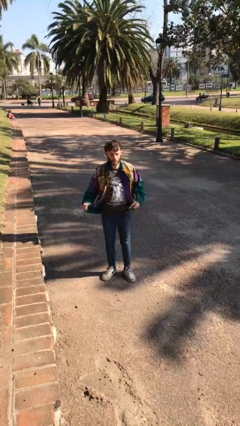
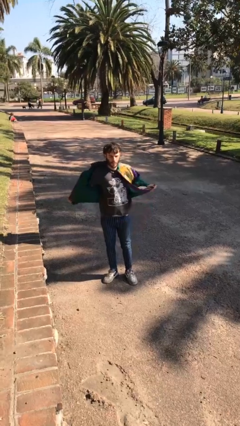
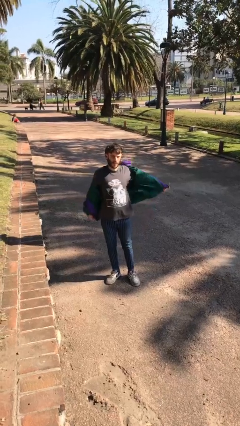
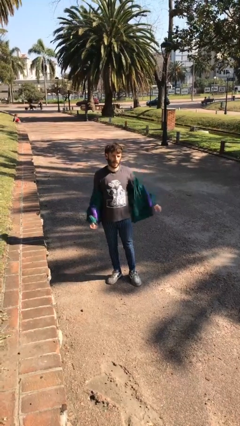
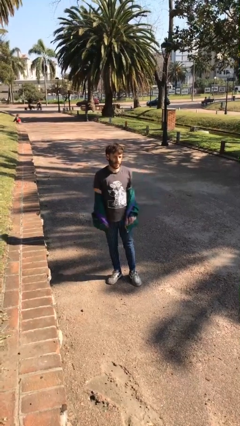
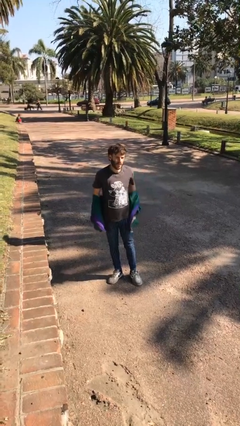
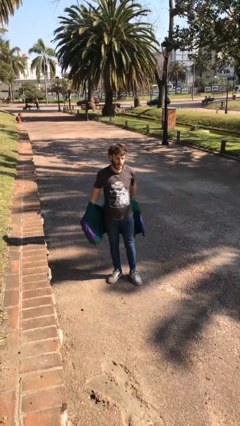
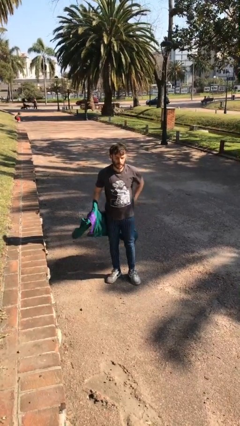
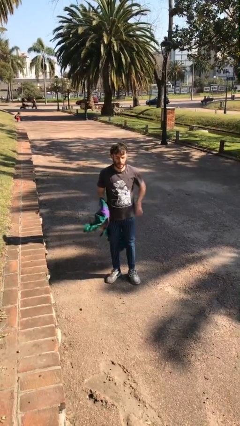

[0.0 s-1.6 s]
person takes off jacket

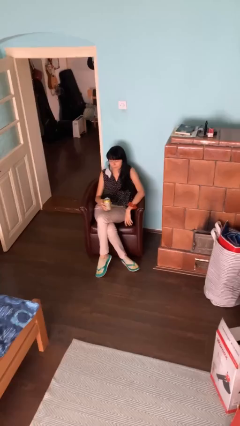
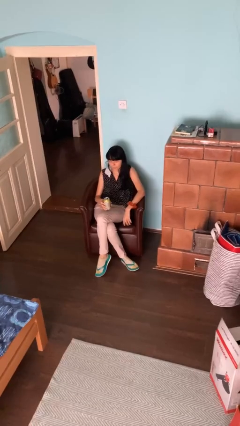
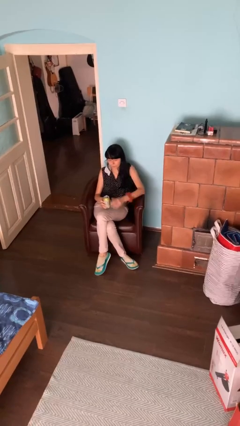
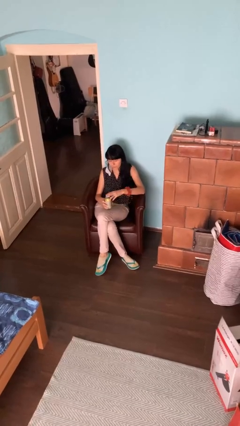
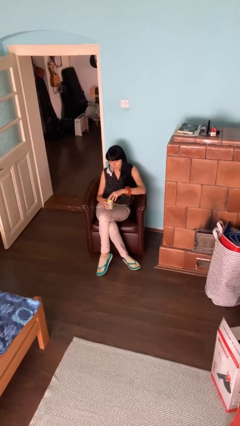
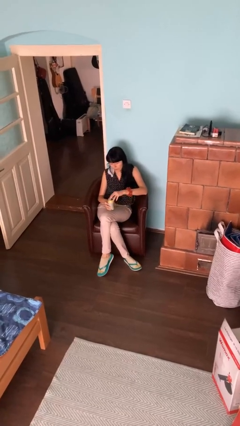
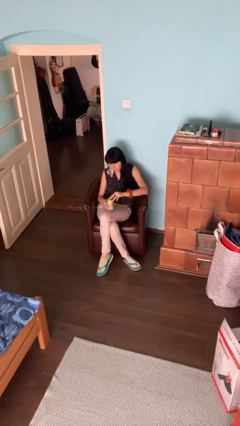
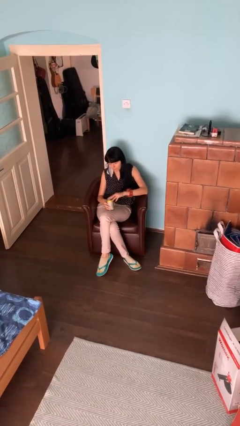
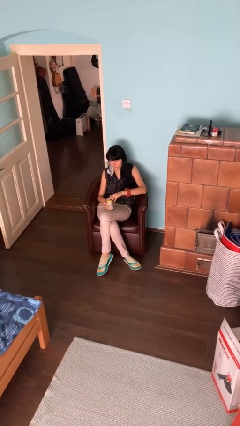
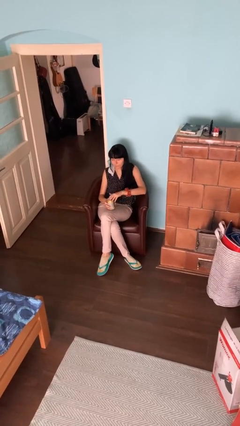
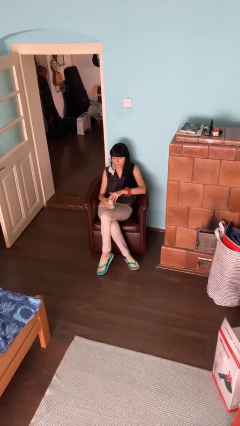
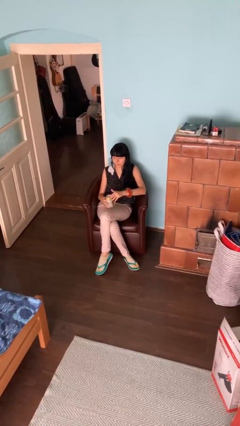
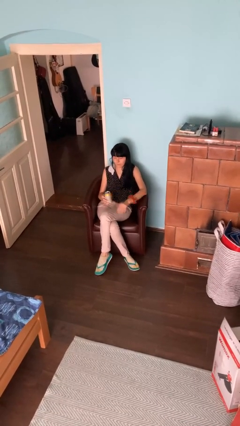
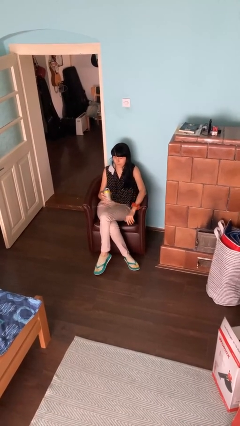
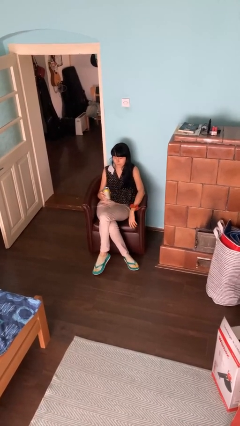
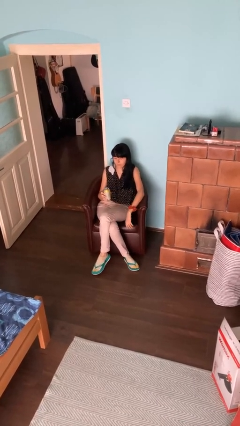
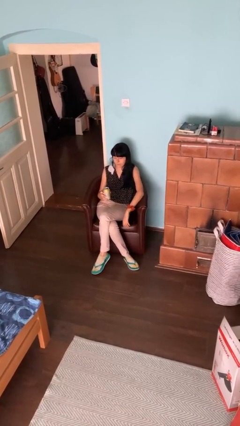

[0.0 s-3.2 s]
person opens beverage can

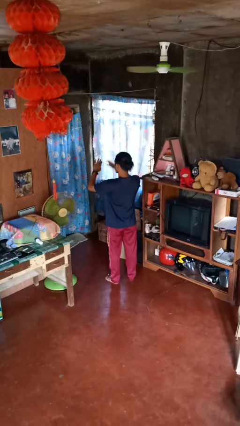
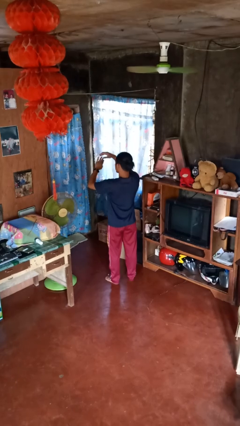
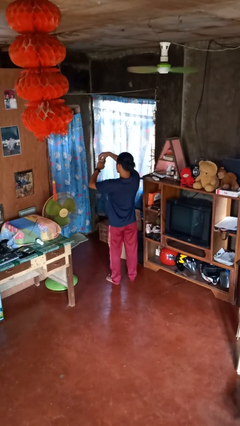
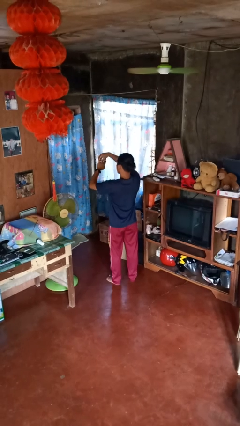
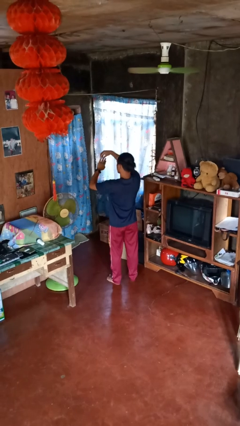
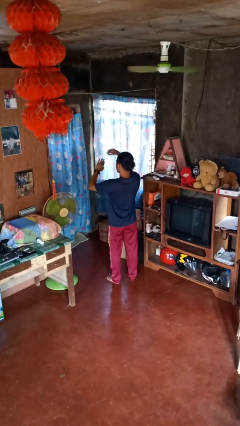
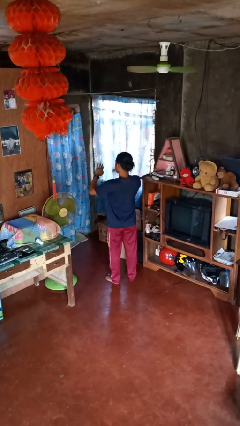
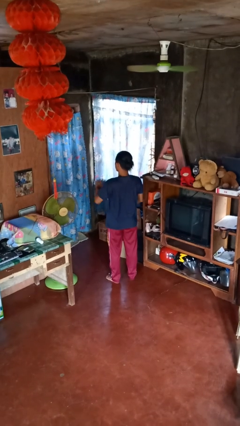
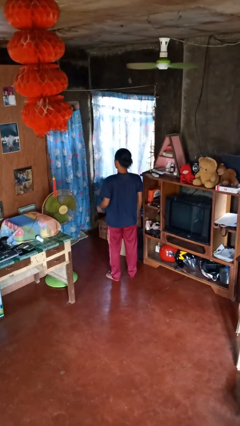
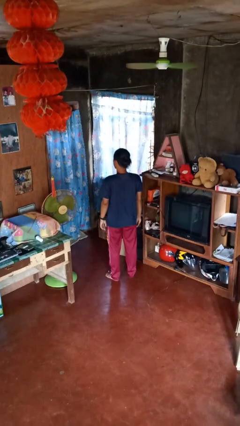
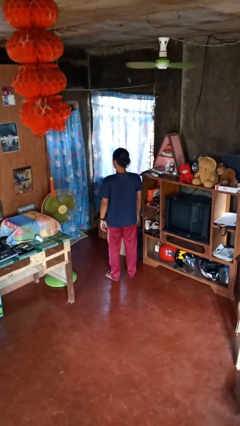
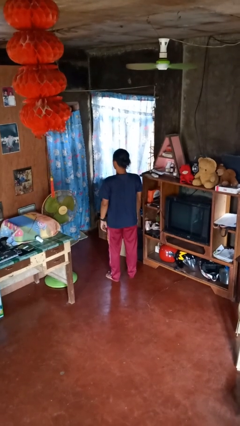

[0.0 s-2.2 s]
person takes off ring

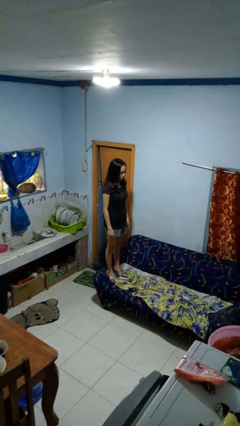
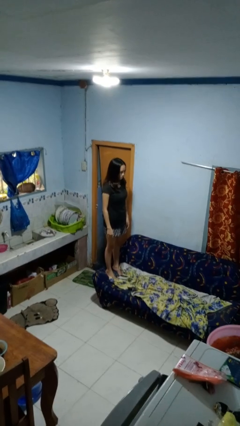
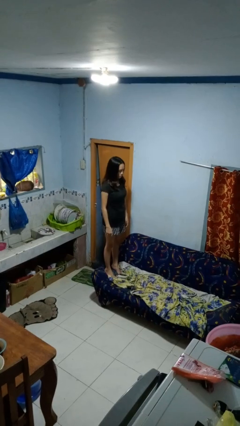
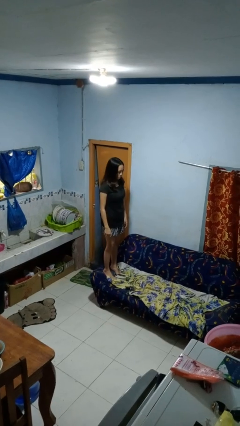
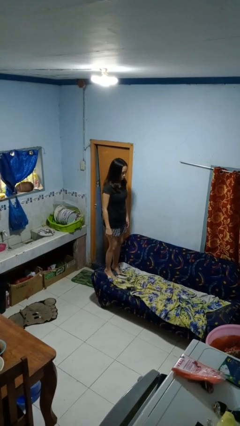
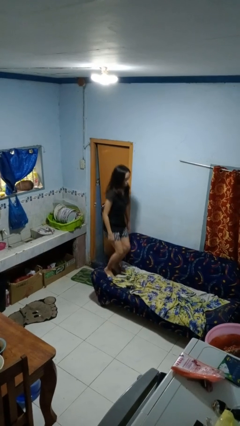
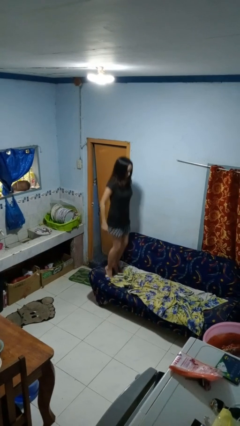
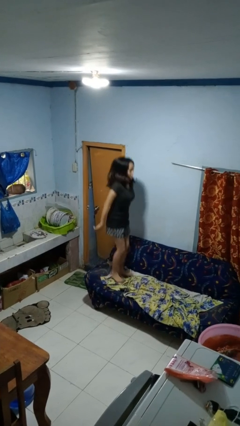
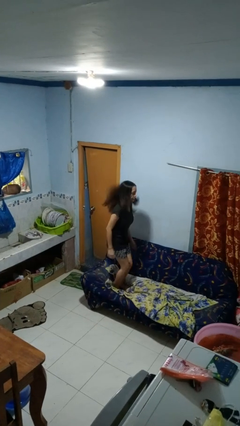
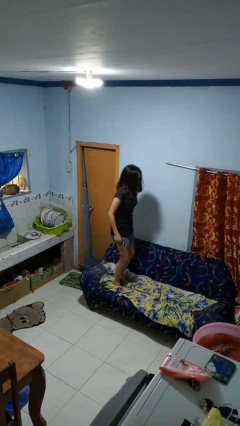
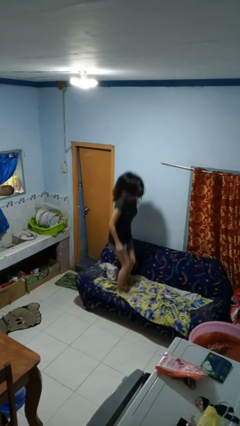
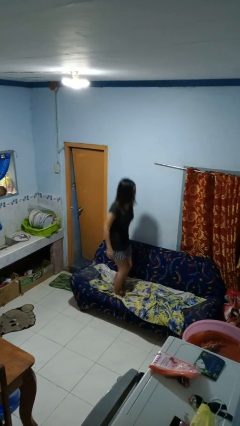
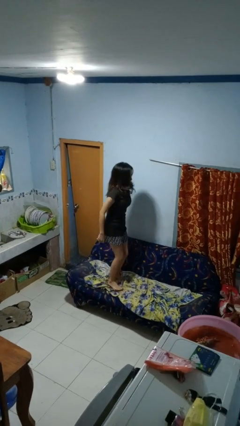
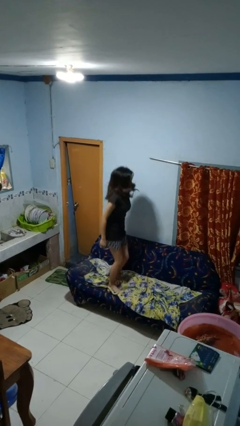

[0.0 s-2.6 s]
person jumps on couch

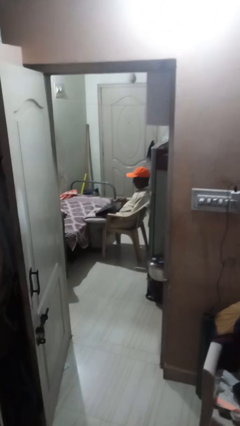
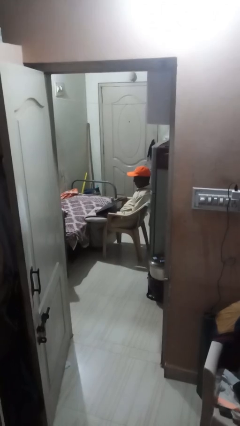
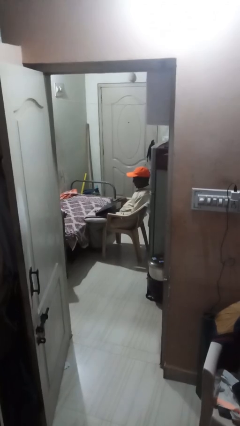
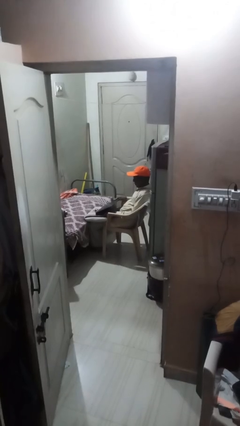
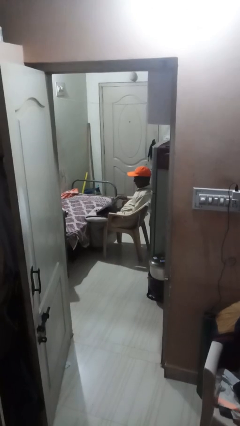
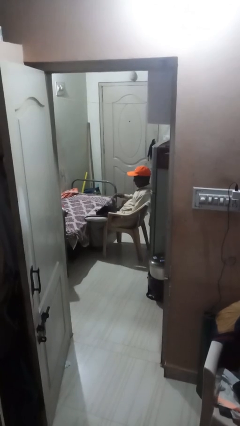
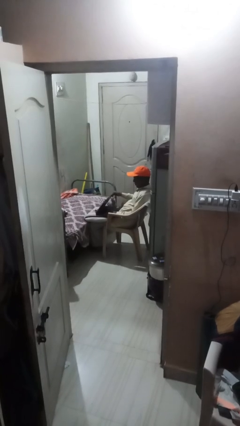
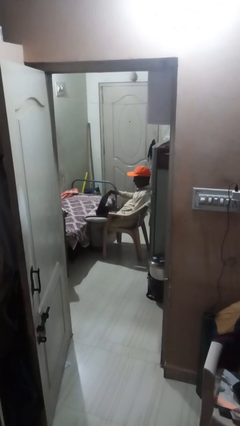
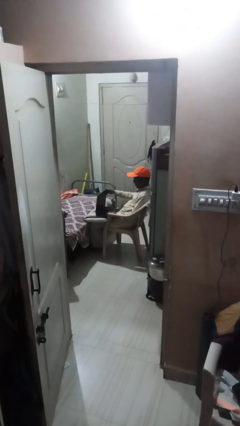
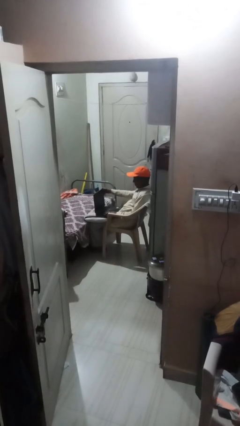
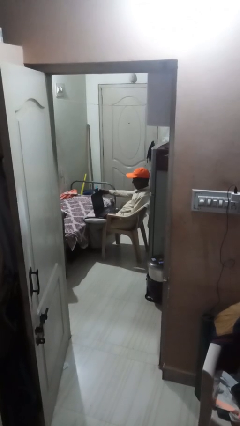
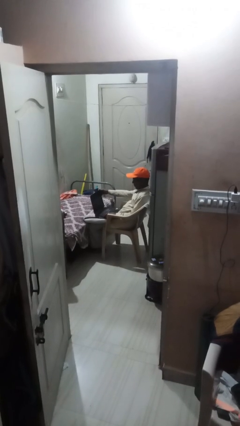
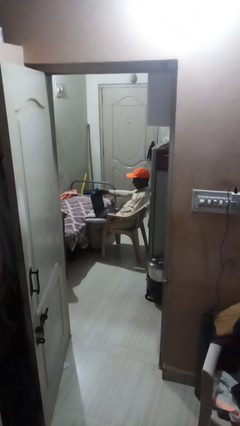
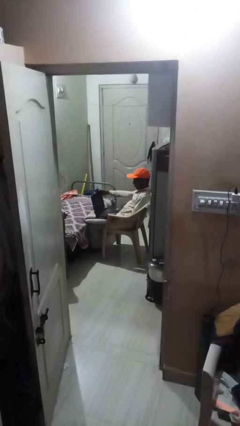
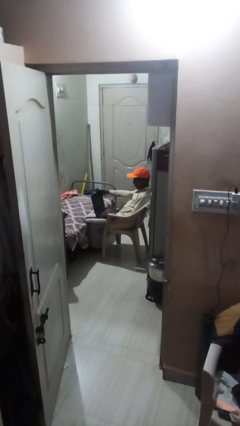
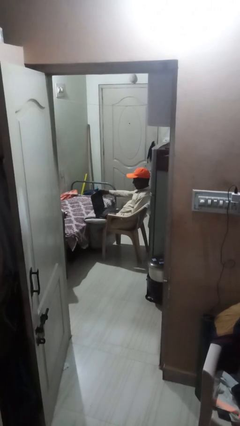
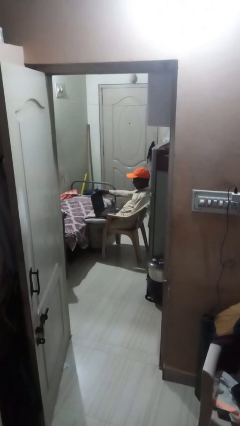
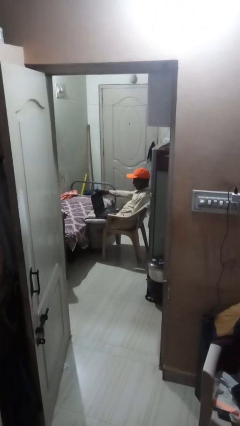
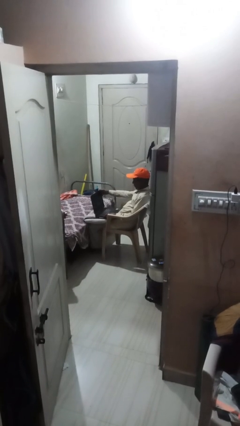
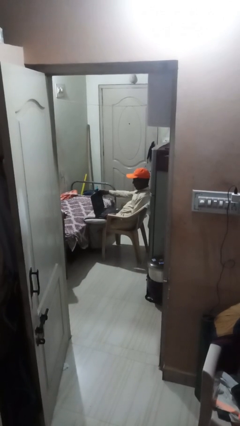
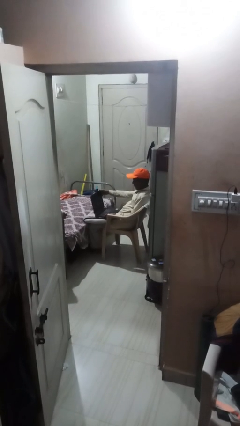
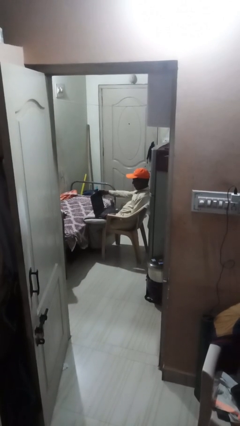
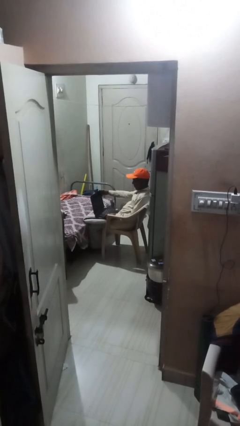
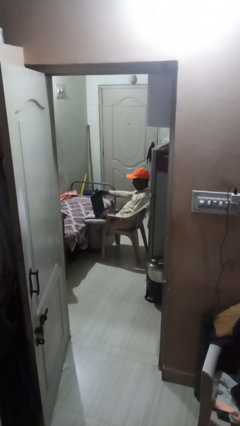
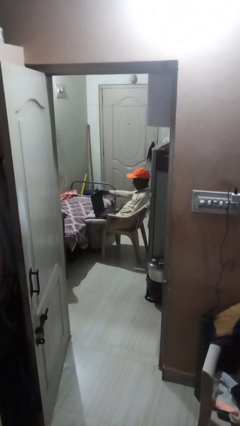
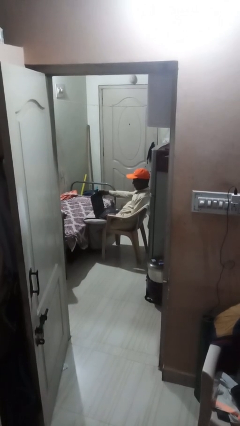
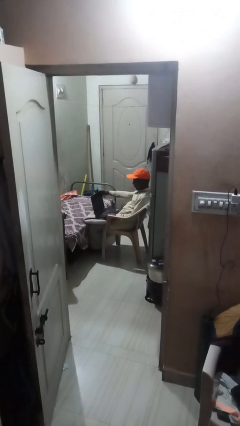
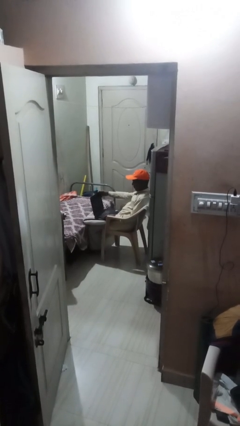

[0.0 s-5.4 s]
person interacts with laptop

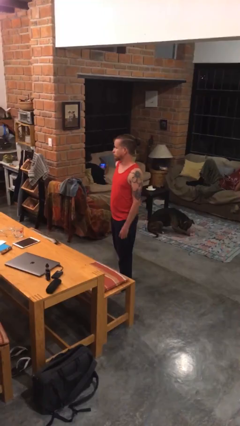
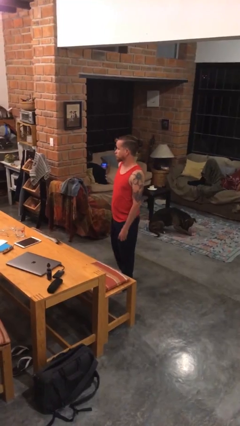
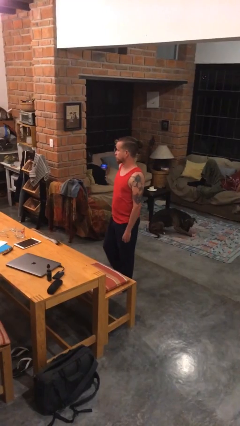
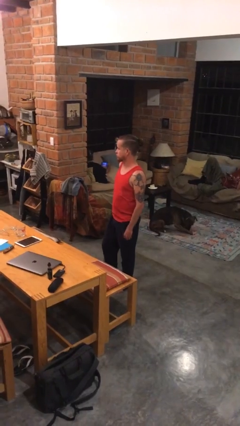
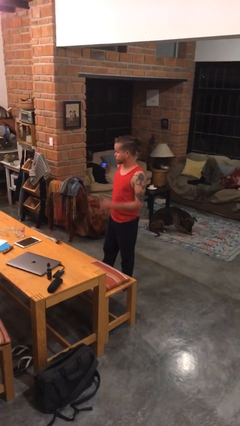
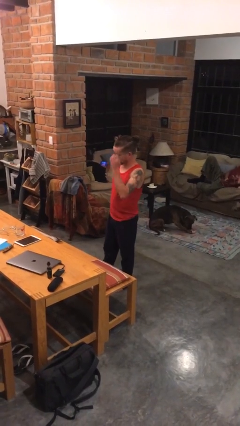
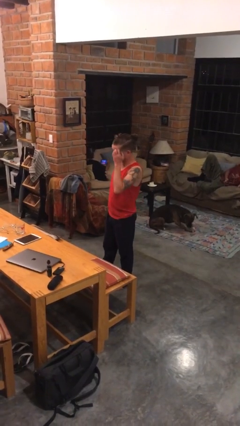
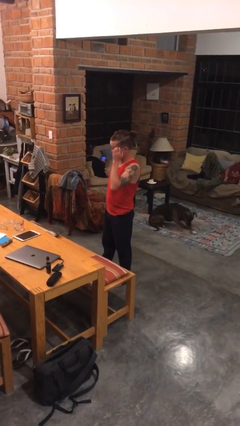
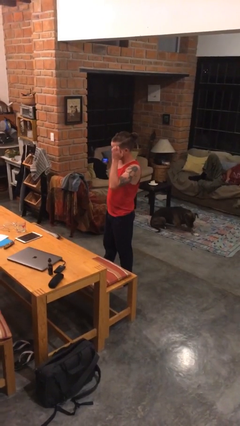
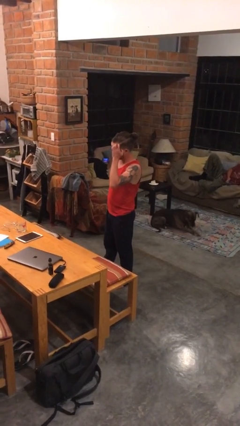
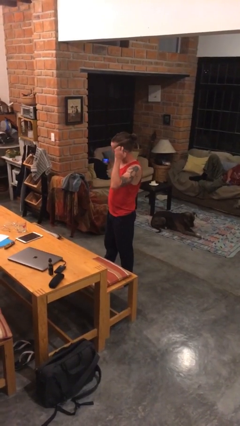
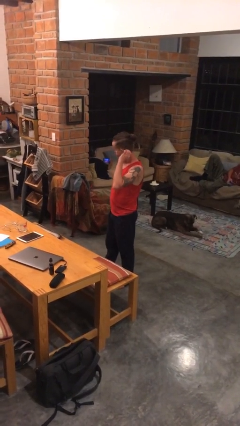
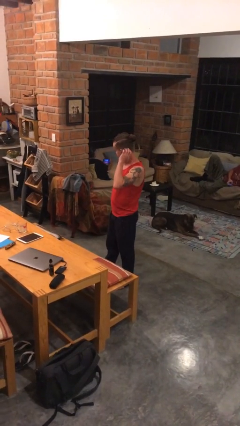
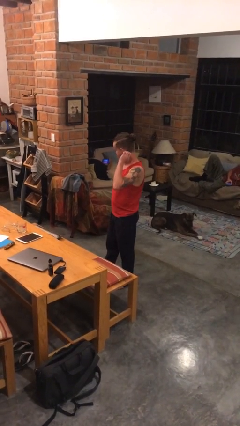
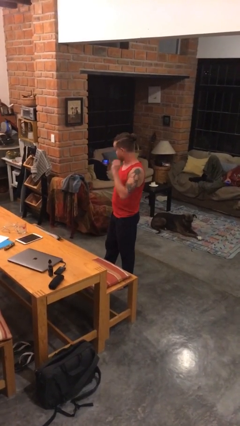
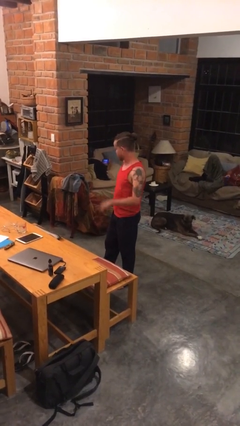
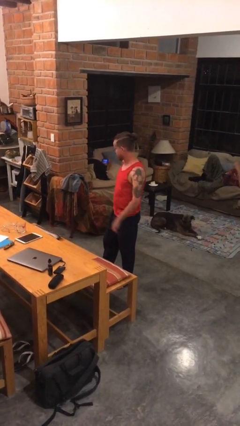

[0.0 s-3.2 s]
person scratches face
